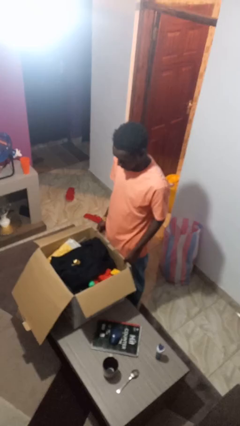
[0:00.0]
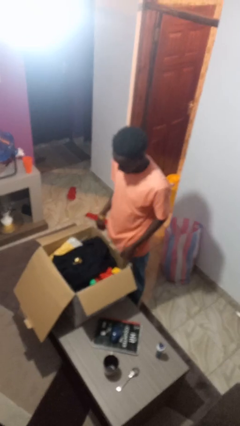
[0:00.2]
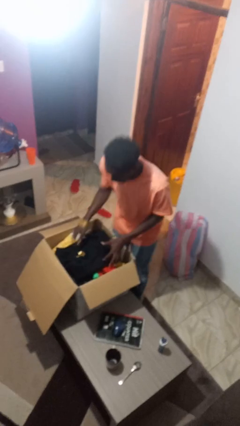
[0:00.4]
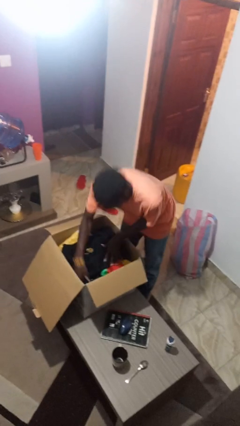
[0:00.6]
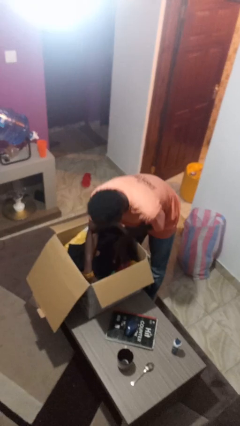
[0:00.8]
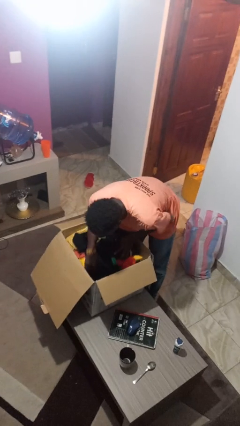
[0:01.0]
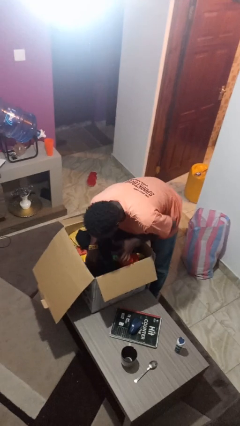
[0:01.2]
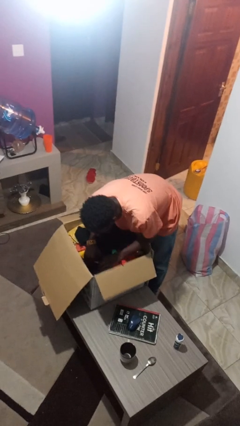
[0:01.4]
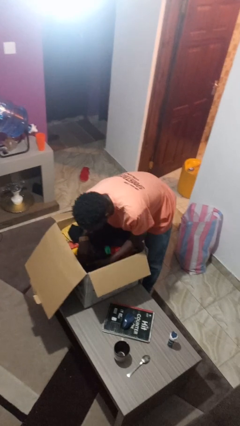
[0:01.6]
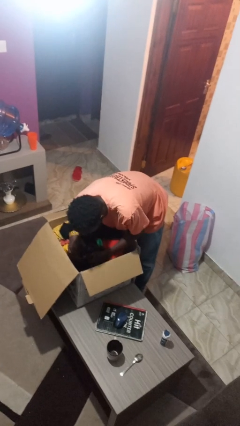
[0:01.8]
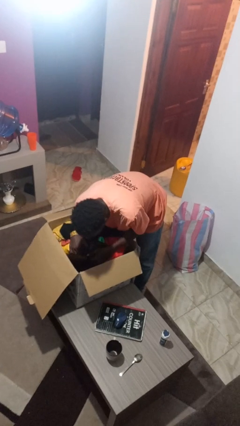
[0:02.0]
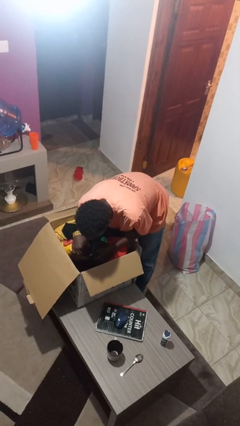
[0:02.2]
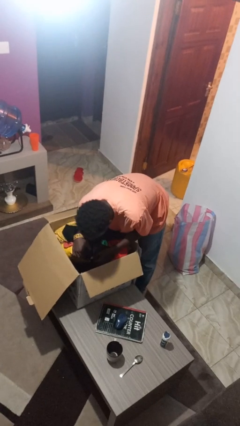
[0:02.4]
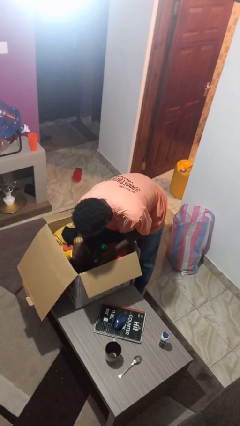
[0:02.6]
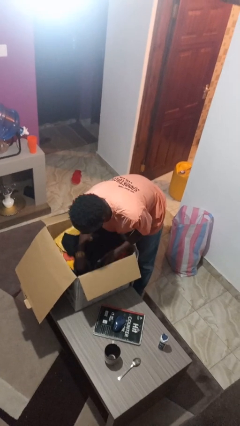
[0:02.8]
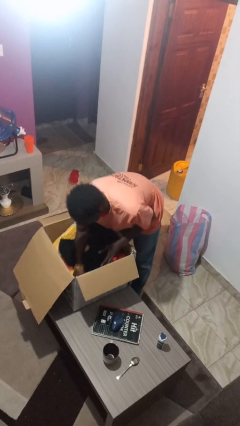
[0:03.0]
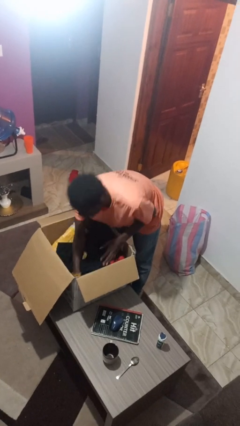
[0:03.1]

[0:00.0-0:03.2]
person searches in box

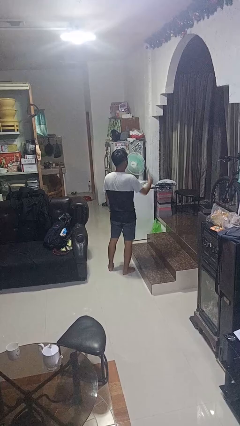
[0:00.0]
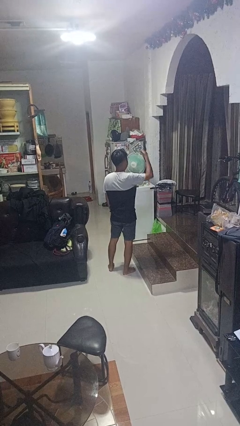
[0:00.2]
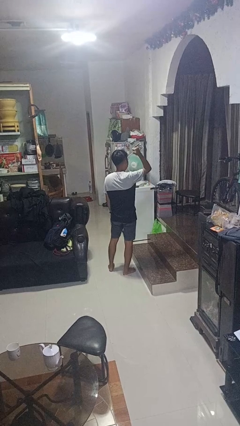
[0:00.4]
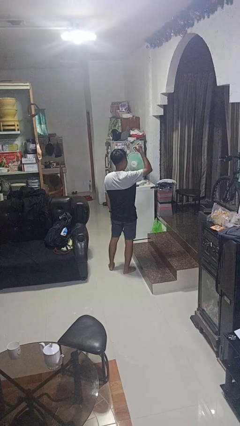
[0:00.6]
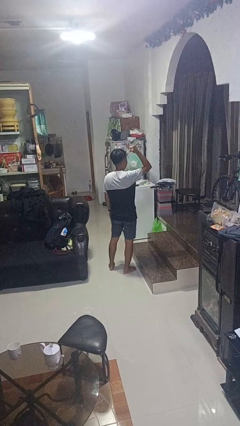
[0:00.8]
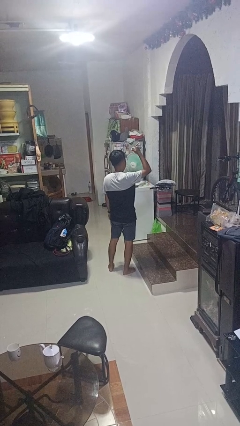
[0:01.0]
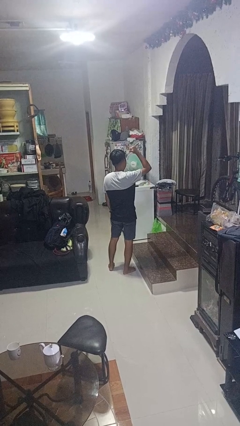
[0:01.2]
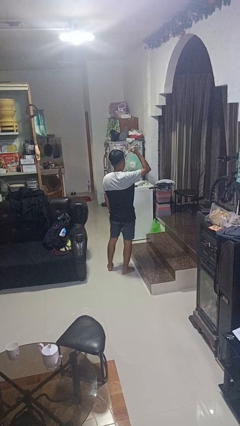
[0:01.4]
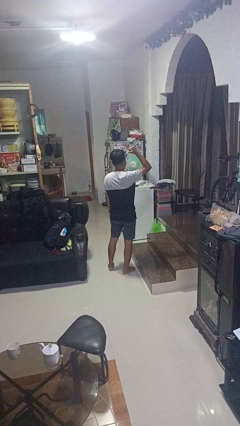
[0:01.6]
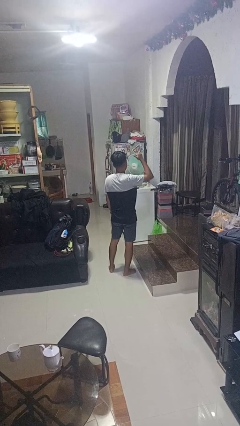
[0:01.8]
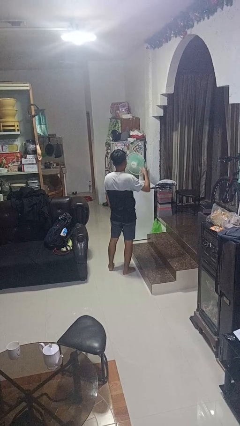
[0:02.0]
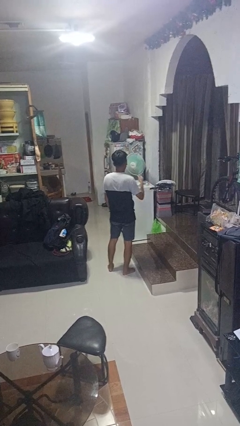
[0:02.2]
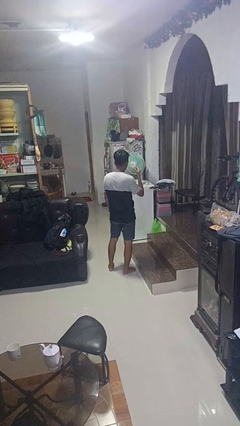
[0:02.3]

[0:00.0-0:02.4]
person gestures behind me

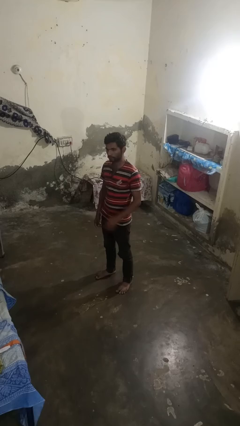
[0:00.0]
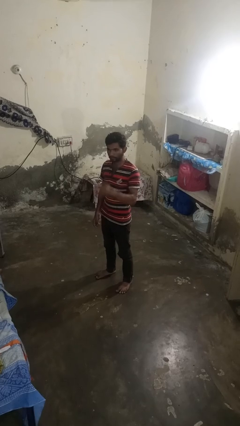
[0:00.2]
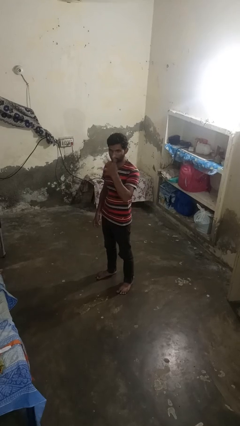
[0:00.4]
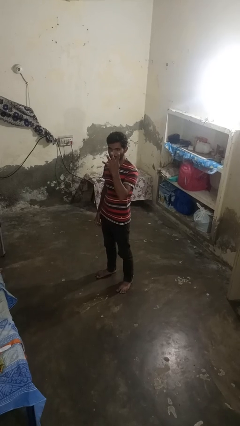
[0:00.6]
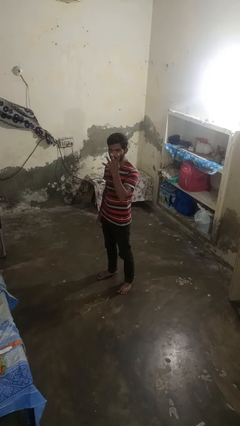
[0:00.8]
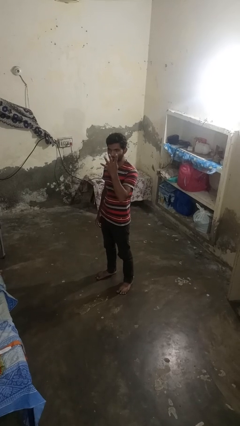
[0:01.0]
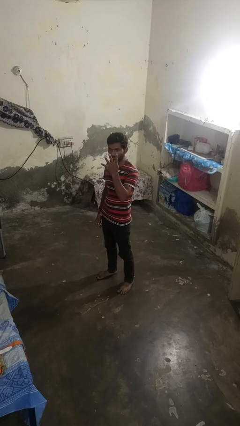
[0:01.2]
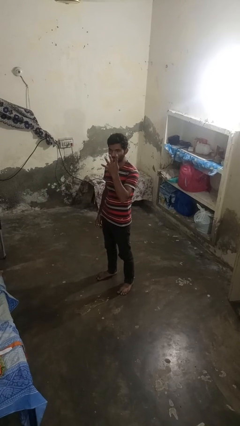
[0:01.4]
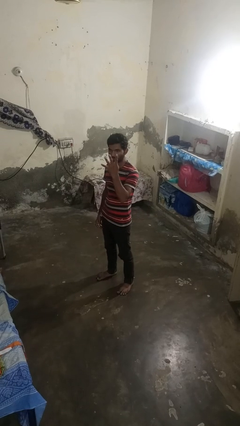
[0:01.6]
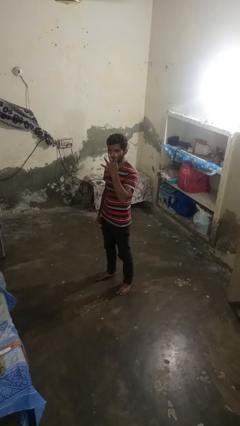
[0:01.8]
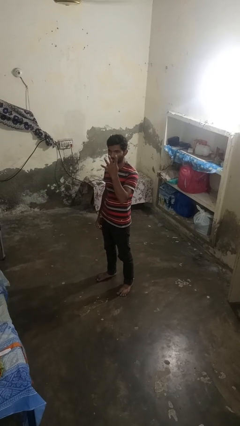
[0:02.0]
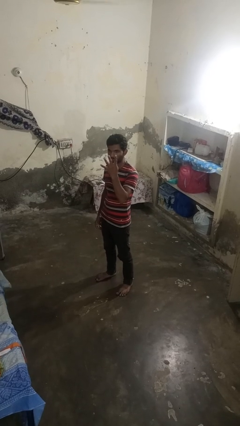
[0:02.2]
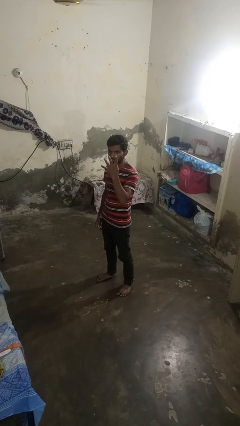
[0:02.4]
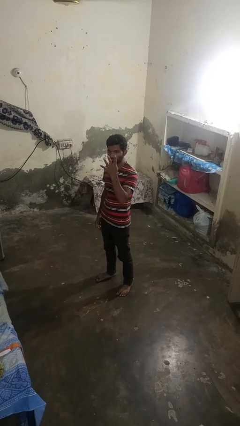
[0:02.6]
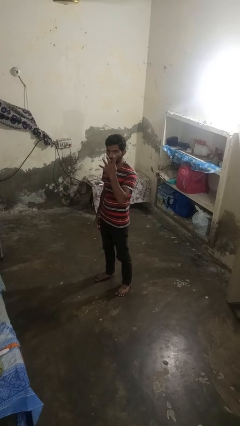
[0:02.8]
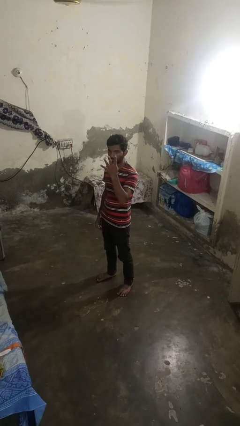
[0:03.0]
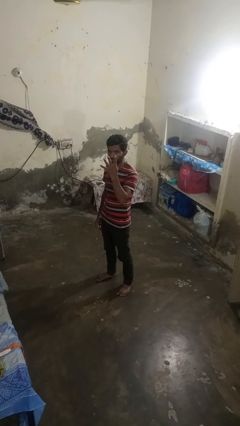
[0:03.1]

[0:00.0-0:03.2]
person gestures number four

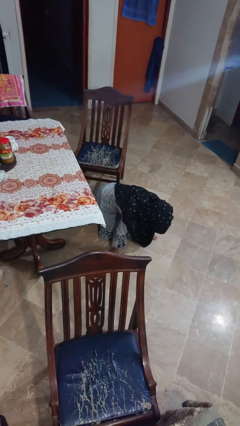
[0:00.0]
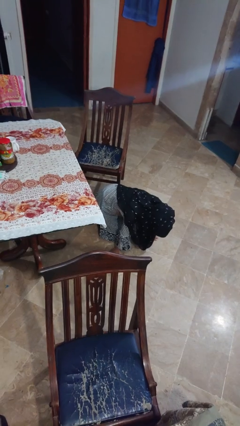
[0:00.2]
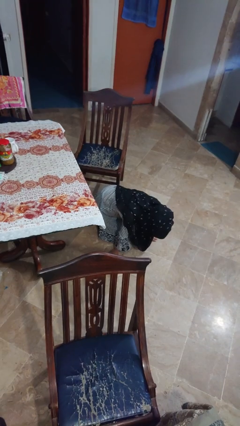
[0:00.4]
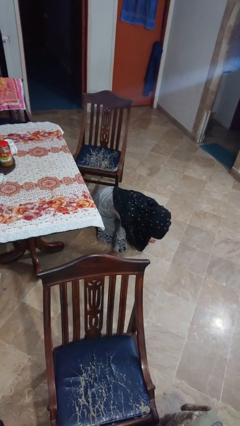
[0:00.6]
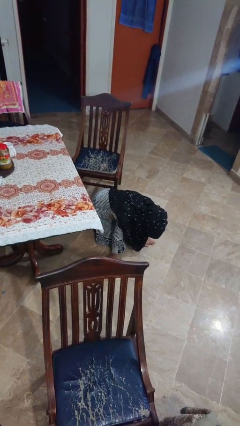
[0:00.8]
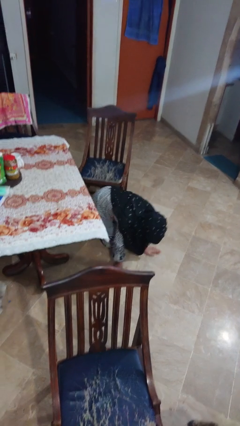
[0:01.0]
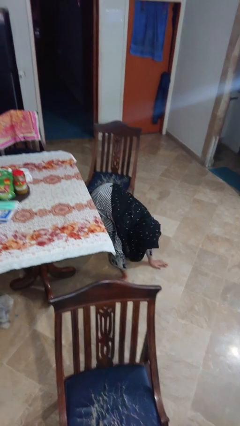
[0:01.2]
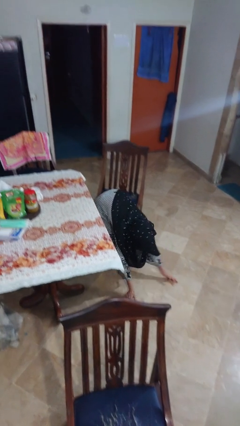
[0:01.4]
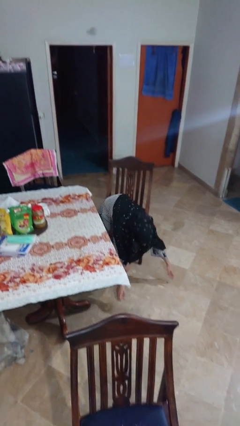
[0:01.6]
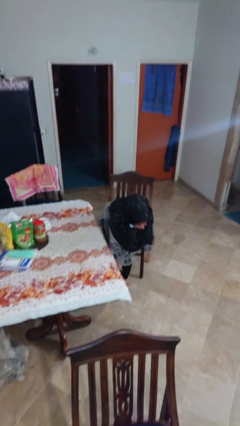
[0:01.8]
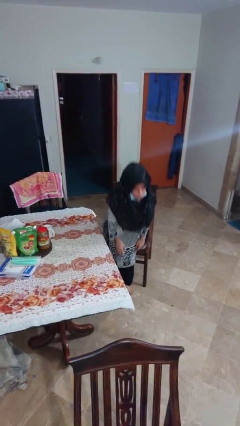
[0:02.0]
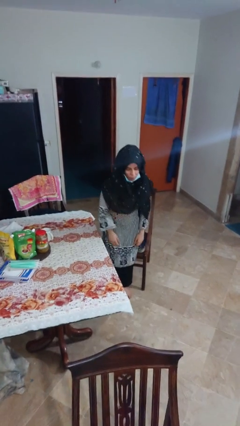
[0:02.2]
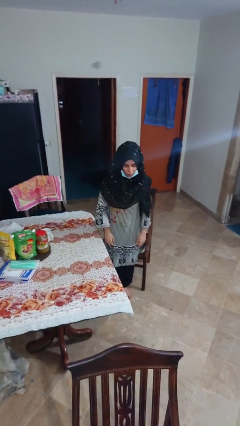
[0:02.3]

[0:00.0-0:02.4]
person stands up from floor

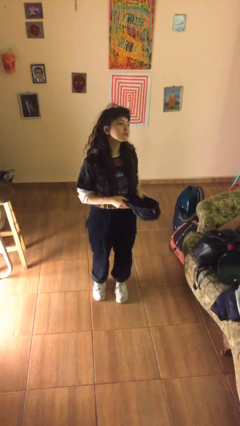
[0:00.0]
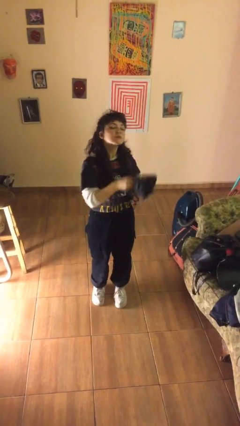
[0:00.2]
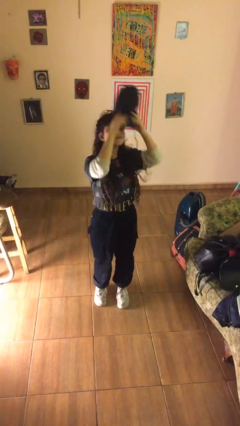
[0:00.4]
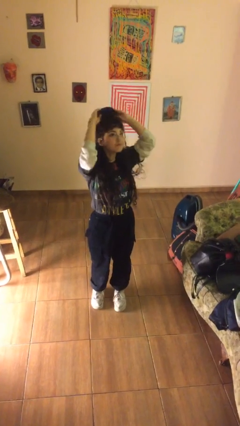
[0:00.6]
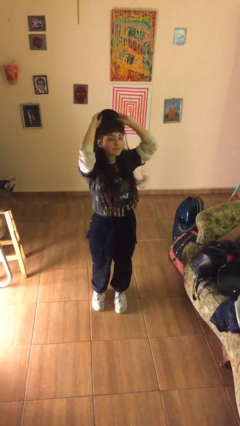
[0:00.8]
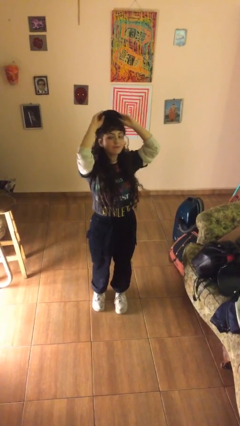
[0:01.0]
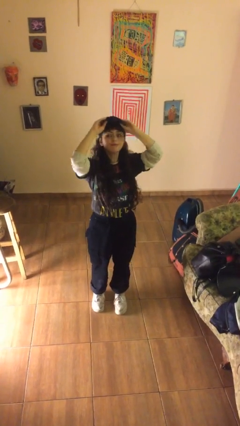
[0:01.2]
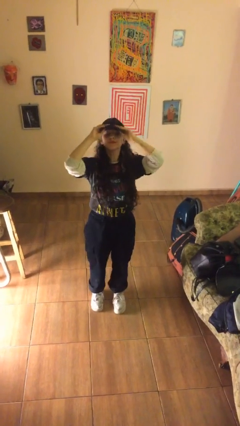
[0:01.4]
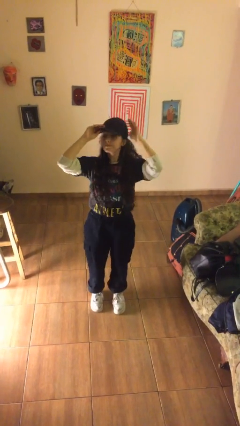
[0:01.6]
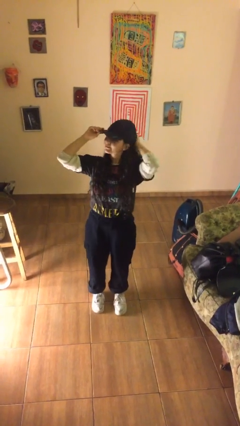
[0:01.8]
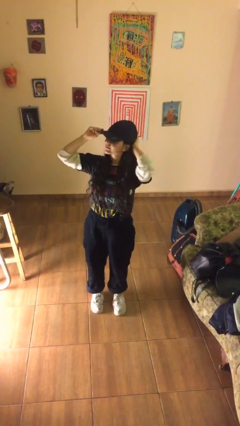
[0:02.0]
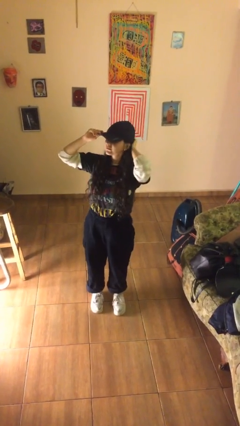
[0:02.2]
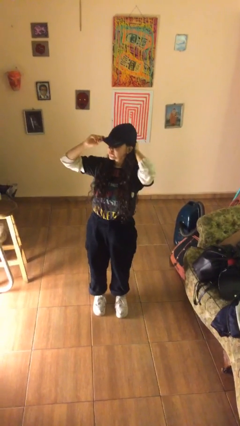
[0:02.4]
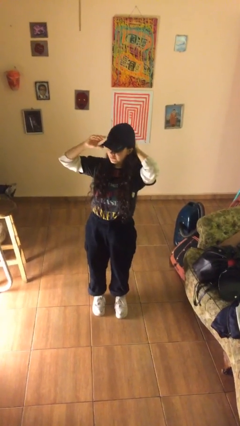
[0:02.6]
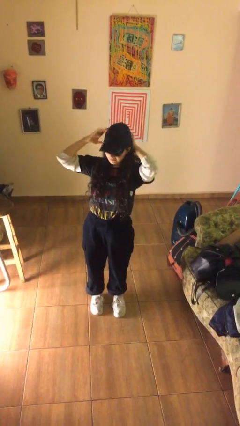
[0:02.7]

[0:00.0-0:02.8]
person puts on hat

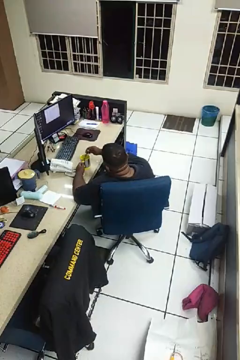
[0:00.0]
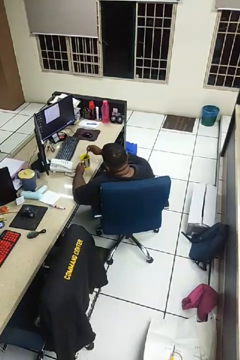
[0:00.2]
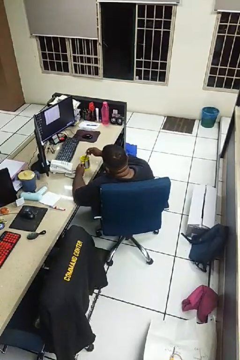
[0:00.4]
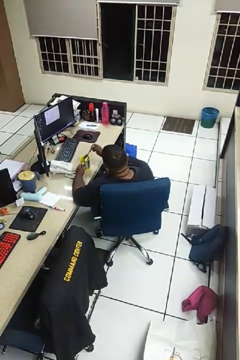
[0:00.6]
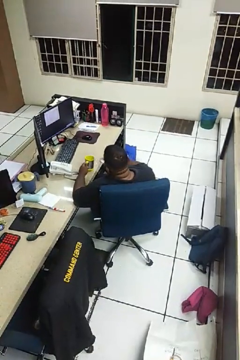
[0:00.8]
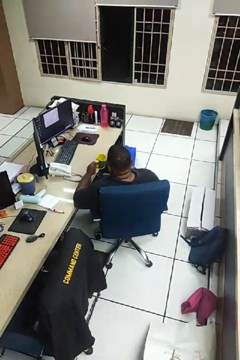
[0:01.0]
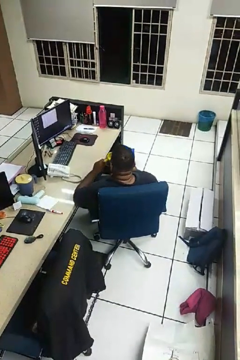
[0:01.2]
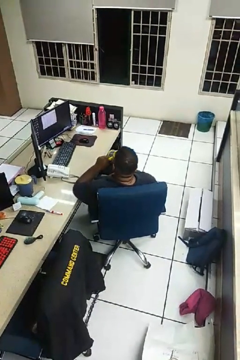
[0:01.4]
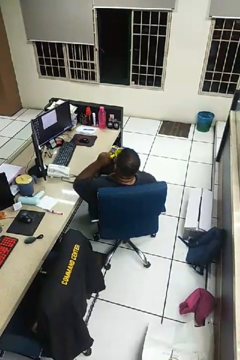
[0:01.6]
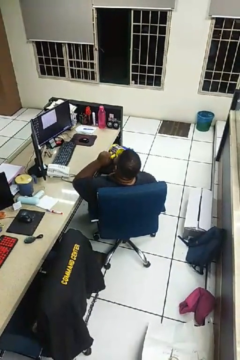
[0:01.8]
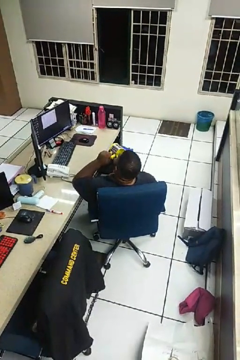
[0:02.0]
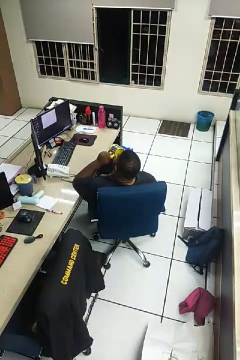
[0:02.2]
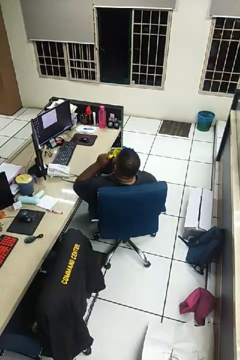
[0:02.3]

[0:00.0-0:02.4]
person drinks from mug

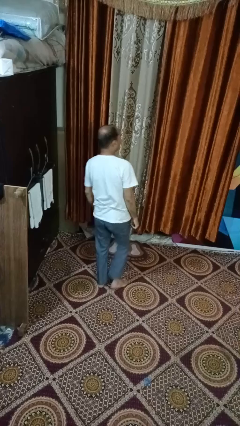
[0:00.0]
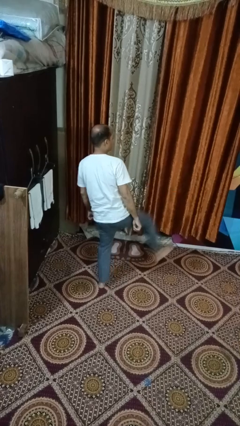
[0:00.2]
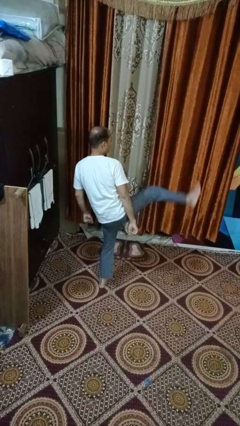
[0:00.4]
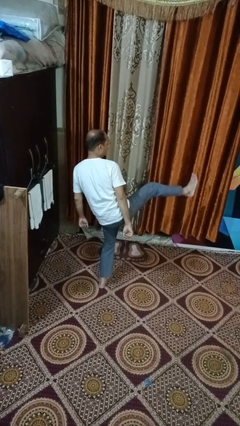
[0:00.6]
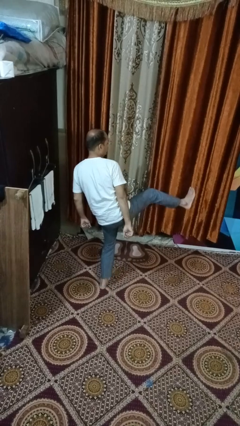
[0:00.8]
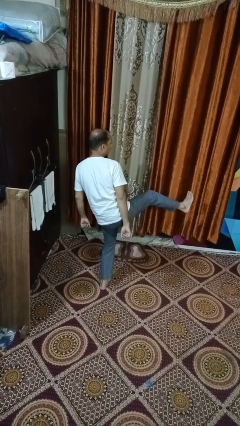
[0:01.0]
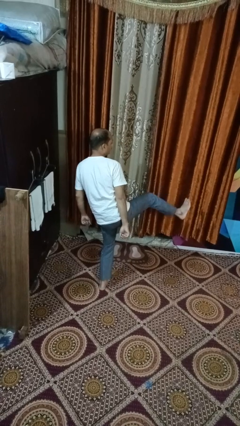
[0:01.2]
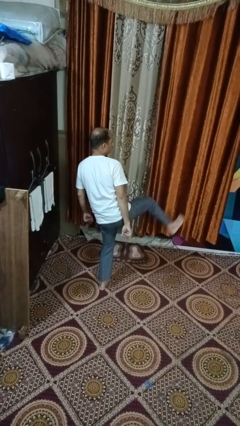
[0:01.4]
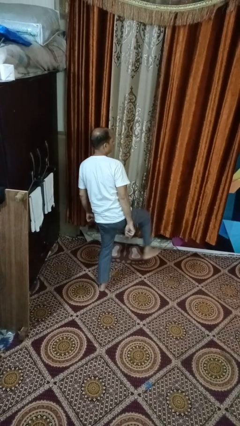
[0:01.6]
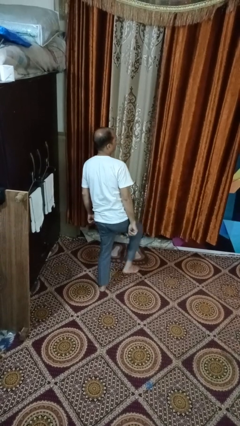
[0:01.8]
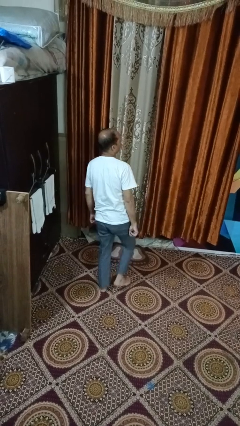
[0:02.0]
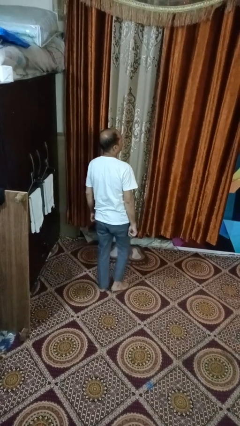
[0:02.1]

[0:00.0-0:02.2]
person karate kicks
